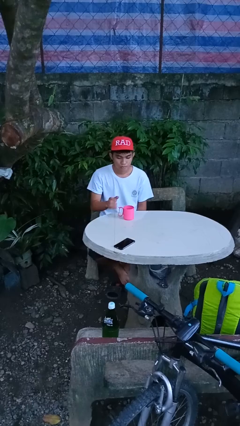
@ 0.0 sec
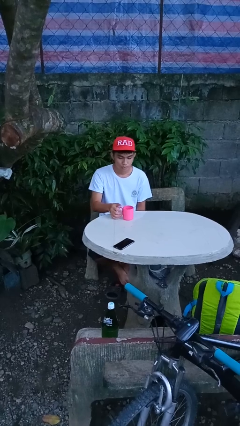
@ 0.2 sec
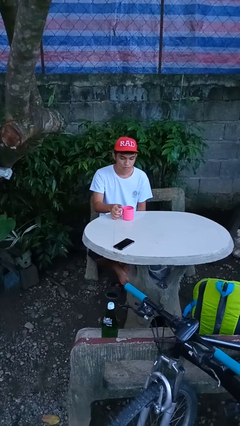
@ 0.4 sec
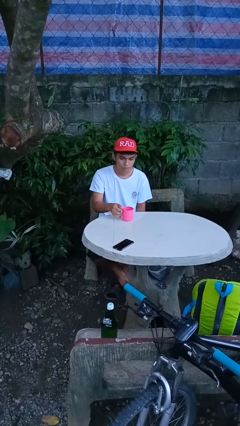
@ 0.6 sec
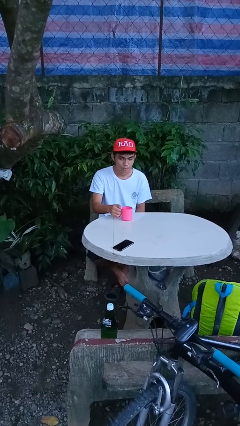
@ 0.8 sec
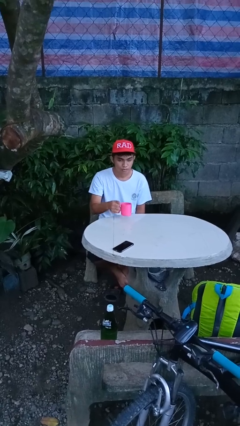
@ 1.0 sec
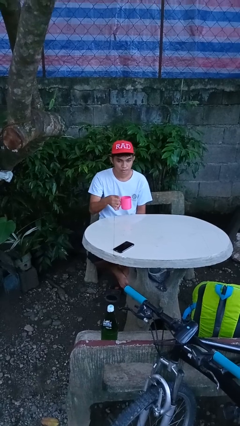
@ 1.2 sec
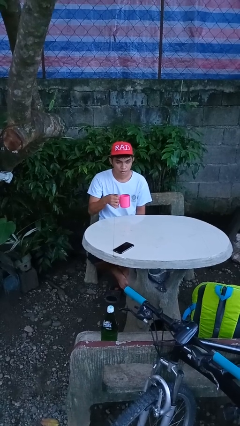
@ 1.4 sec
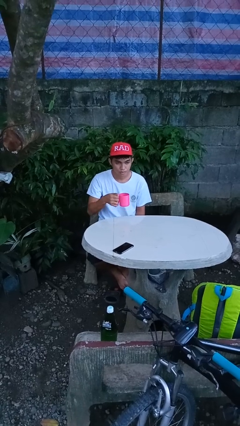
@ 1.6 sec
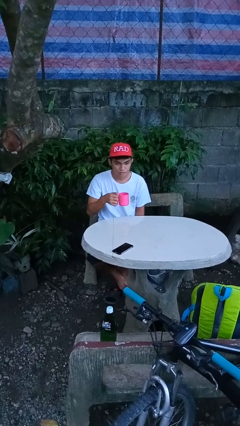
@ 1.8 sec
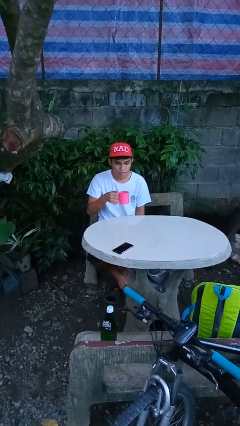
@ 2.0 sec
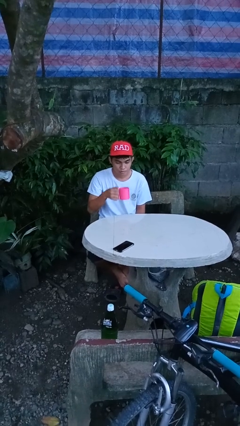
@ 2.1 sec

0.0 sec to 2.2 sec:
person picks up object from table

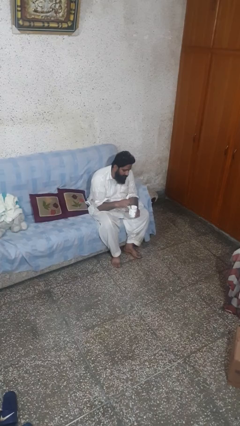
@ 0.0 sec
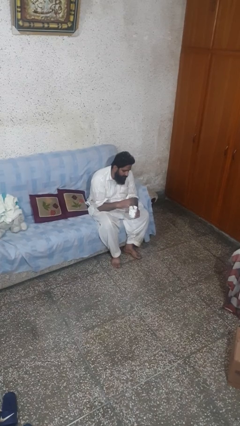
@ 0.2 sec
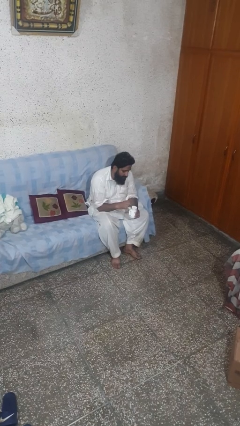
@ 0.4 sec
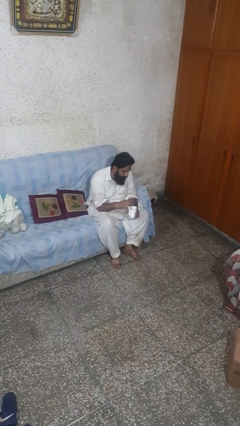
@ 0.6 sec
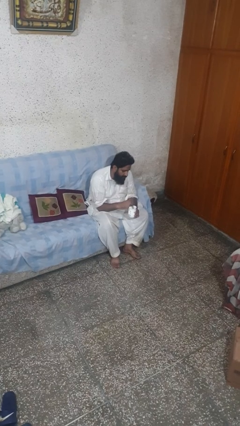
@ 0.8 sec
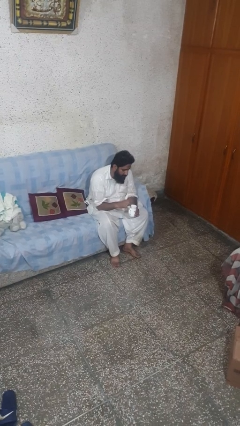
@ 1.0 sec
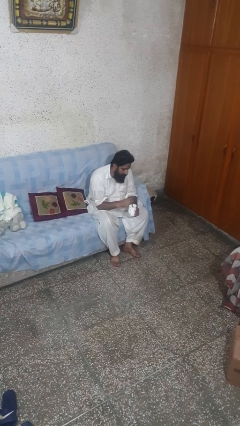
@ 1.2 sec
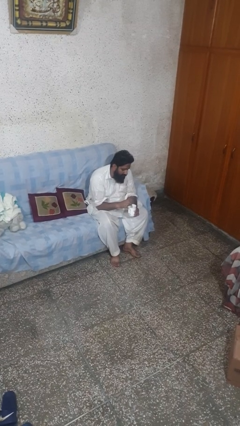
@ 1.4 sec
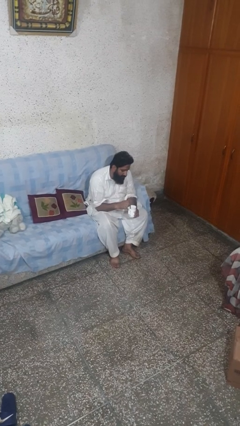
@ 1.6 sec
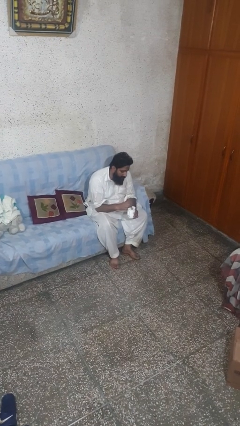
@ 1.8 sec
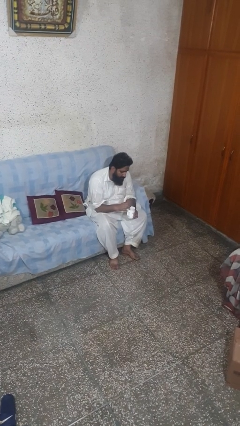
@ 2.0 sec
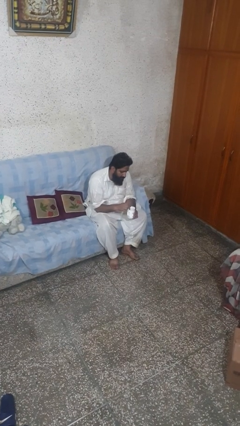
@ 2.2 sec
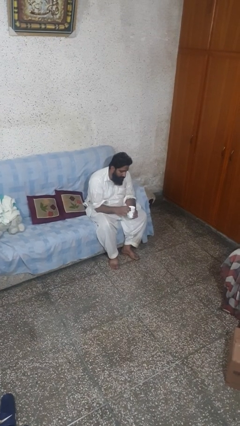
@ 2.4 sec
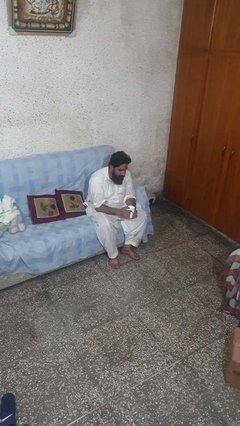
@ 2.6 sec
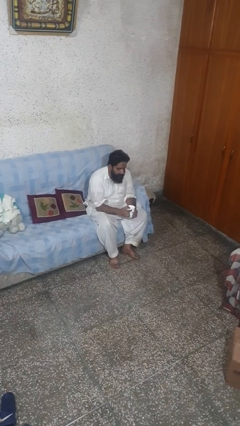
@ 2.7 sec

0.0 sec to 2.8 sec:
person stirs mug

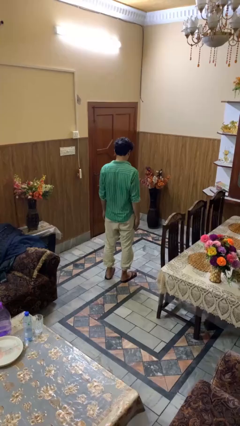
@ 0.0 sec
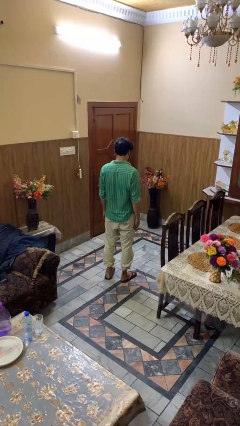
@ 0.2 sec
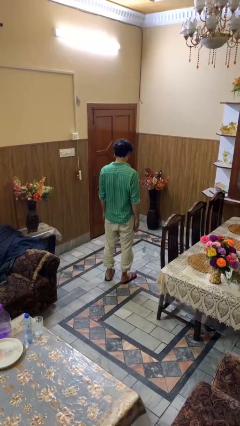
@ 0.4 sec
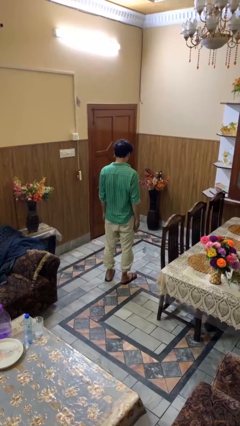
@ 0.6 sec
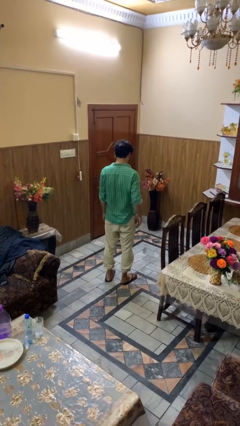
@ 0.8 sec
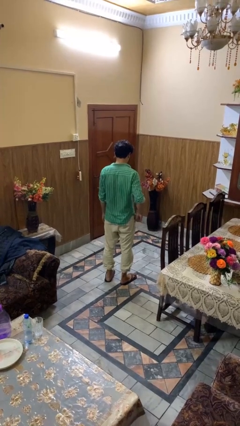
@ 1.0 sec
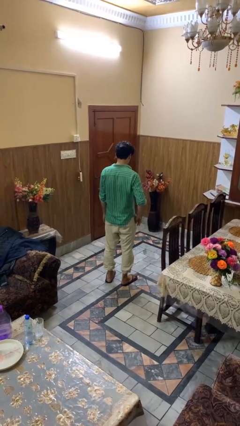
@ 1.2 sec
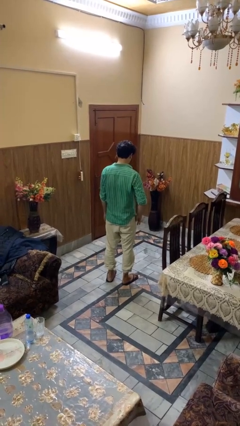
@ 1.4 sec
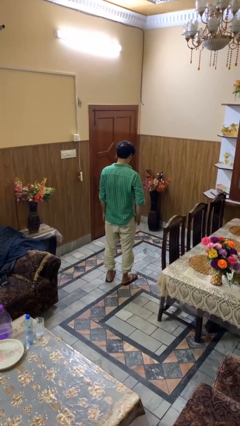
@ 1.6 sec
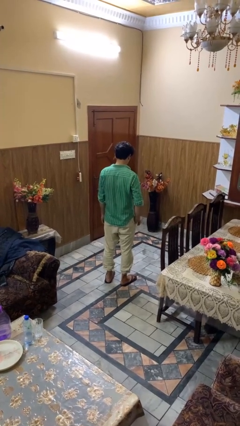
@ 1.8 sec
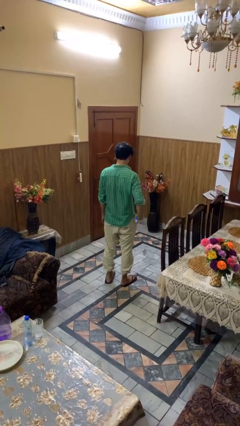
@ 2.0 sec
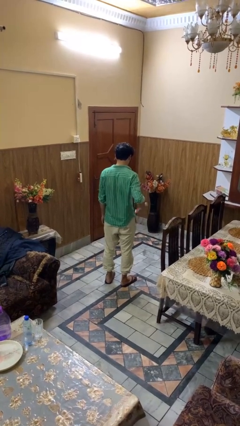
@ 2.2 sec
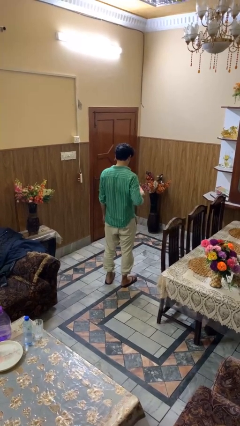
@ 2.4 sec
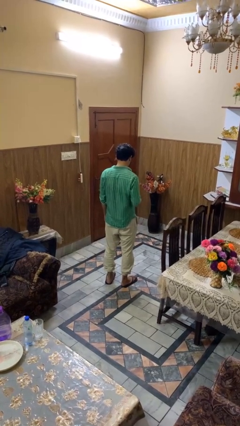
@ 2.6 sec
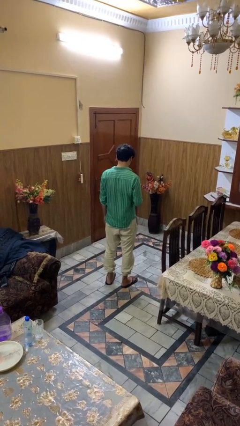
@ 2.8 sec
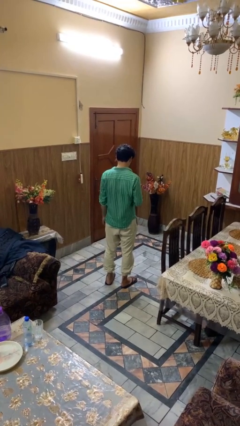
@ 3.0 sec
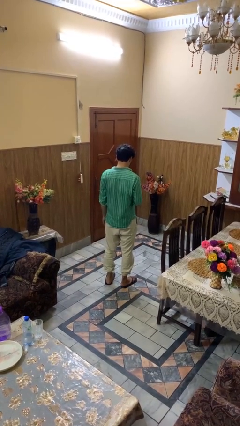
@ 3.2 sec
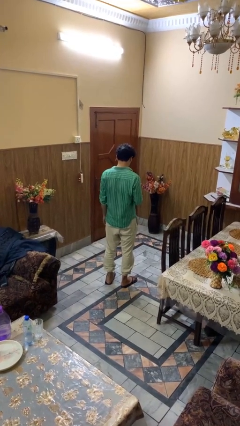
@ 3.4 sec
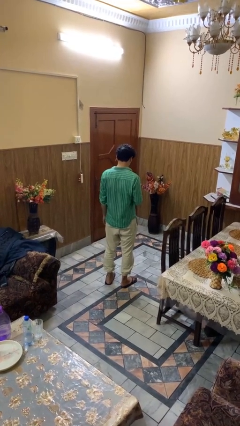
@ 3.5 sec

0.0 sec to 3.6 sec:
person takes phone from pocket

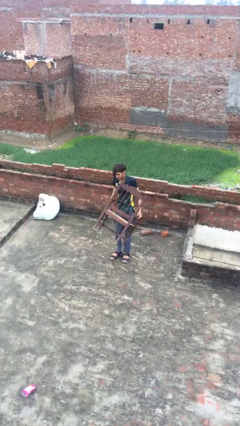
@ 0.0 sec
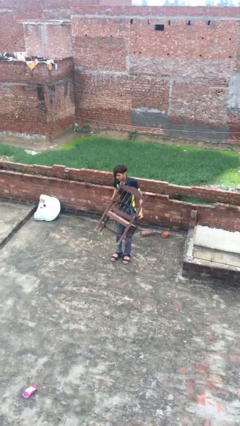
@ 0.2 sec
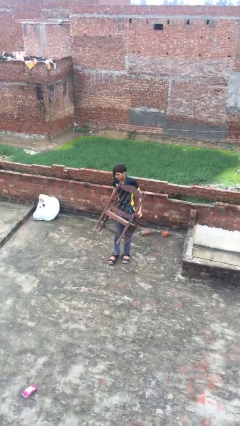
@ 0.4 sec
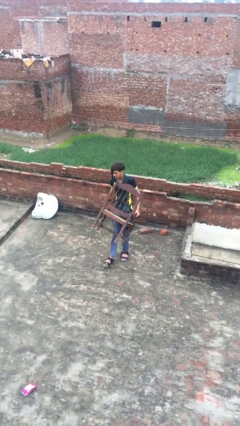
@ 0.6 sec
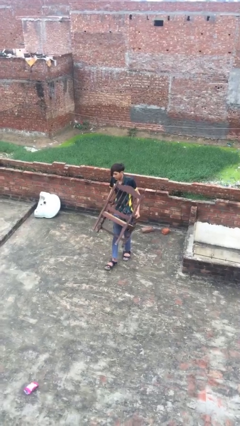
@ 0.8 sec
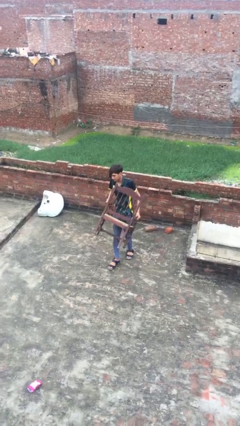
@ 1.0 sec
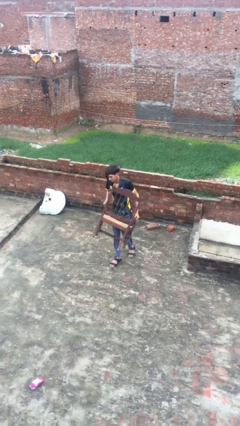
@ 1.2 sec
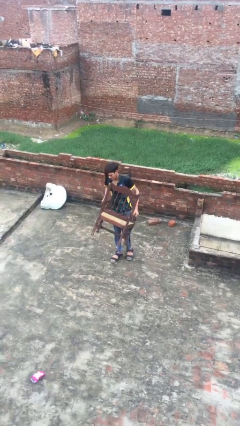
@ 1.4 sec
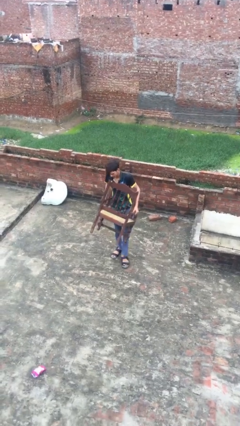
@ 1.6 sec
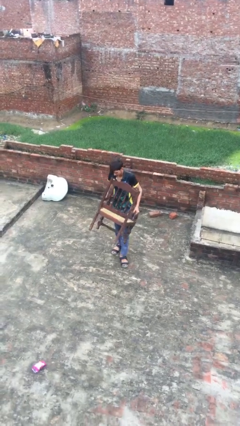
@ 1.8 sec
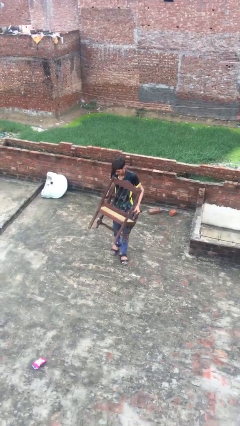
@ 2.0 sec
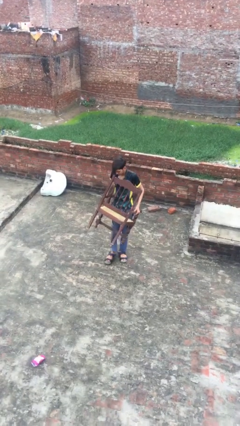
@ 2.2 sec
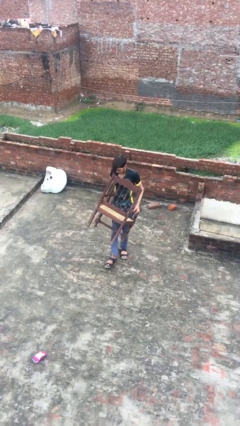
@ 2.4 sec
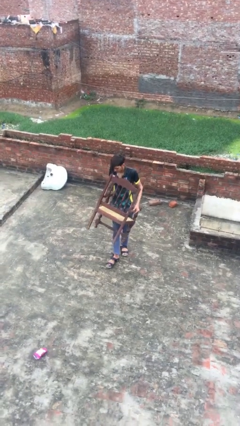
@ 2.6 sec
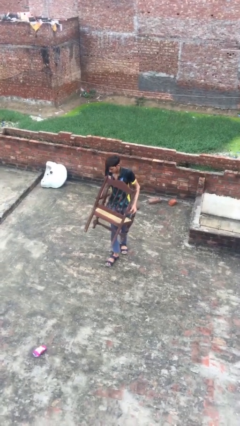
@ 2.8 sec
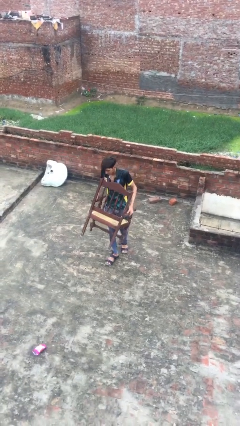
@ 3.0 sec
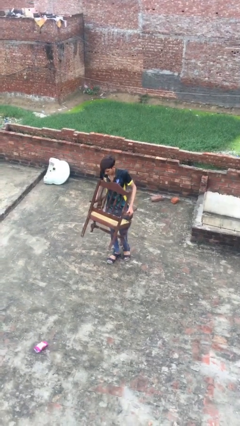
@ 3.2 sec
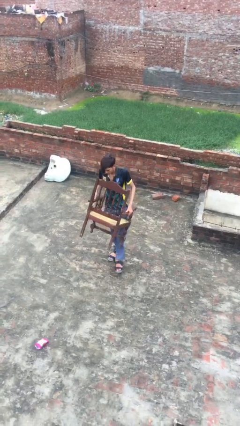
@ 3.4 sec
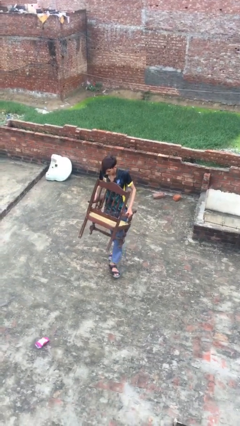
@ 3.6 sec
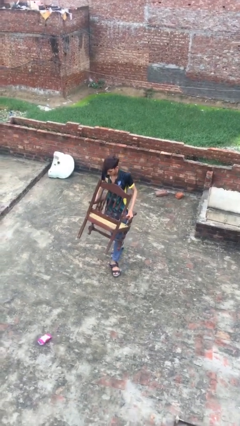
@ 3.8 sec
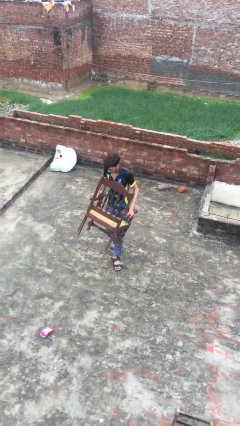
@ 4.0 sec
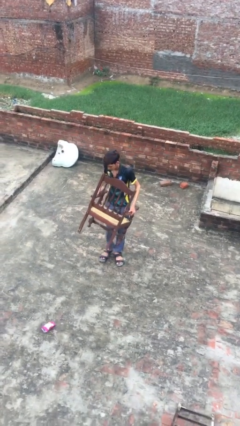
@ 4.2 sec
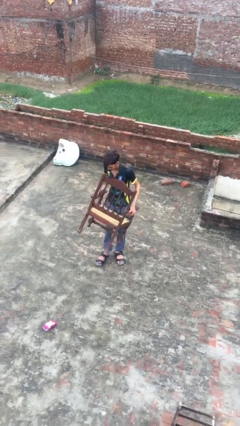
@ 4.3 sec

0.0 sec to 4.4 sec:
person carries heavy object

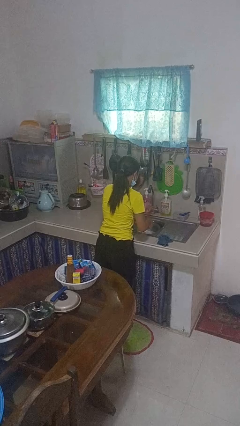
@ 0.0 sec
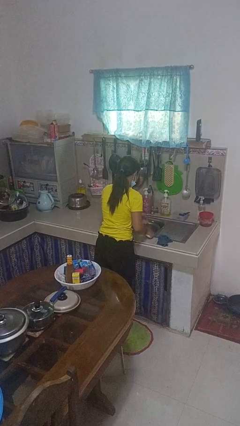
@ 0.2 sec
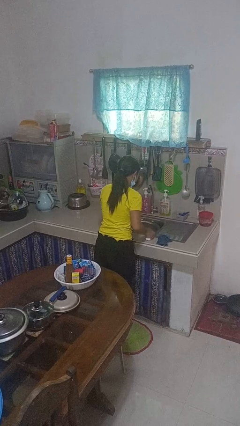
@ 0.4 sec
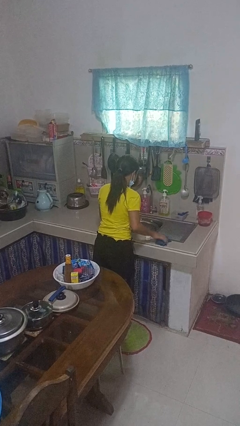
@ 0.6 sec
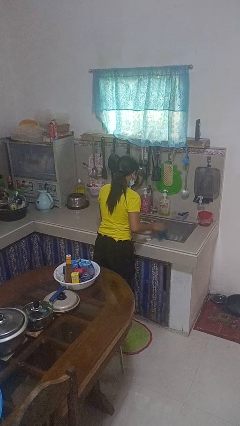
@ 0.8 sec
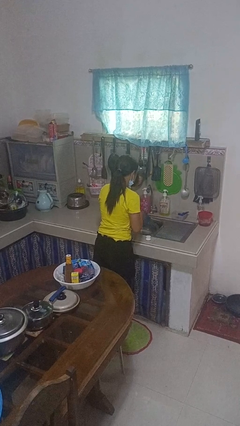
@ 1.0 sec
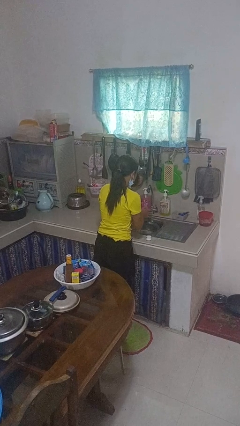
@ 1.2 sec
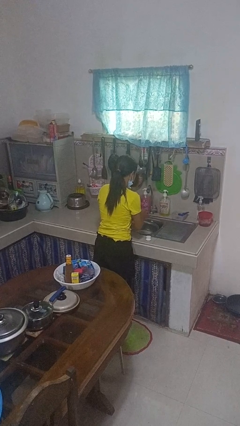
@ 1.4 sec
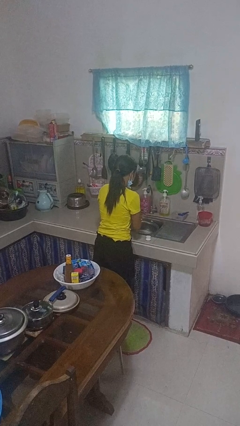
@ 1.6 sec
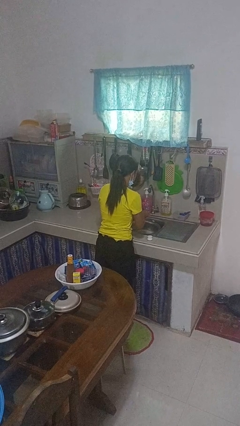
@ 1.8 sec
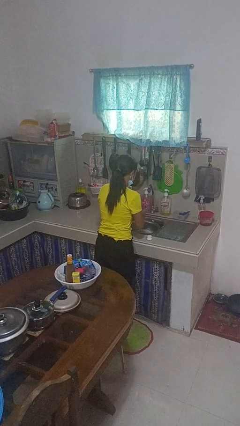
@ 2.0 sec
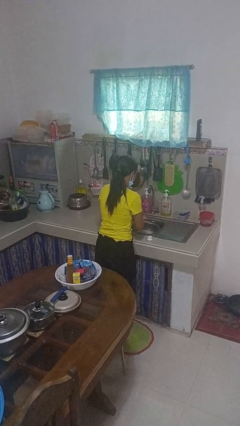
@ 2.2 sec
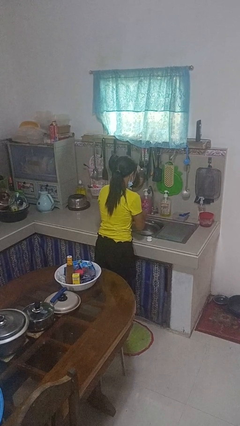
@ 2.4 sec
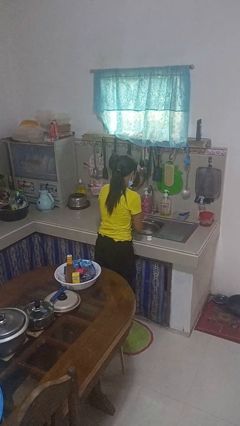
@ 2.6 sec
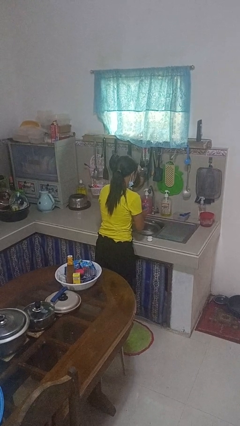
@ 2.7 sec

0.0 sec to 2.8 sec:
person dries hands with towel

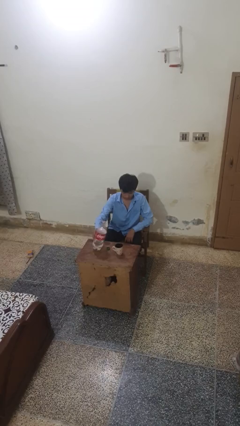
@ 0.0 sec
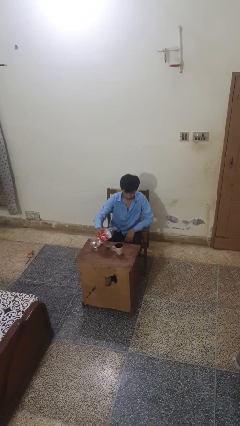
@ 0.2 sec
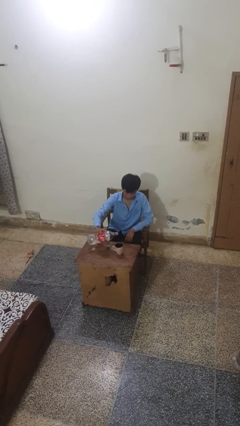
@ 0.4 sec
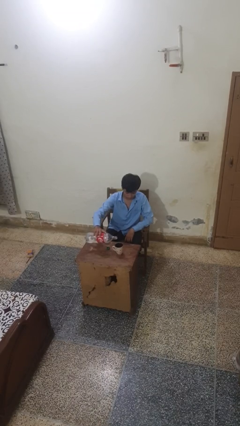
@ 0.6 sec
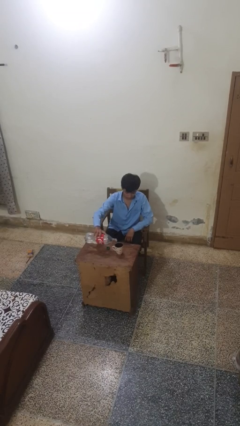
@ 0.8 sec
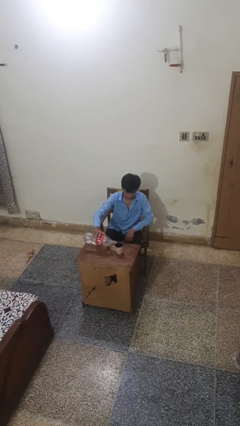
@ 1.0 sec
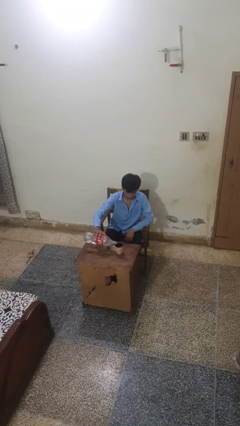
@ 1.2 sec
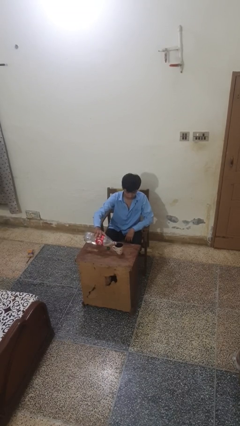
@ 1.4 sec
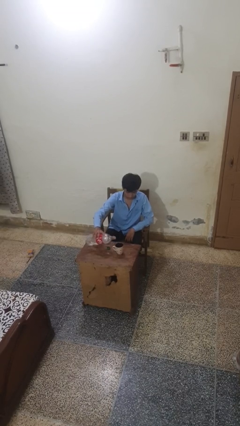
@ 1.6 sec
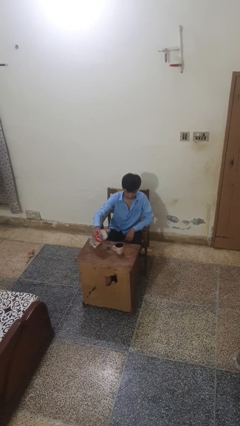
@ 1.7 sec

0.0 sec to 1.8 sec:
person pours liquid into cup
